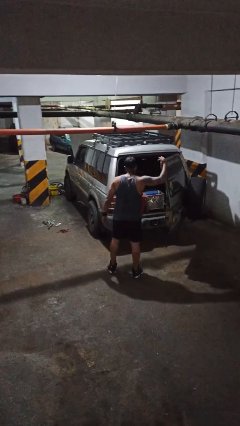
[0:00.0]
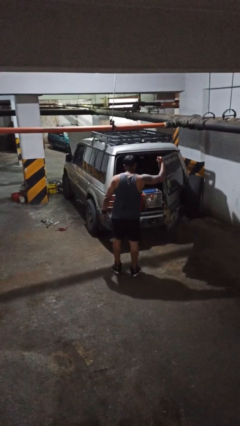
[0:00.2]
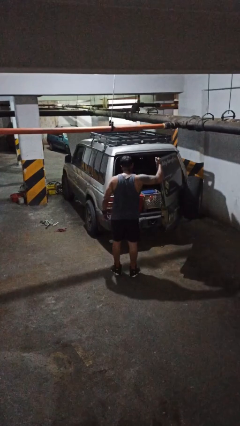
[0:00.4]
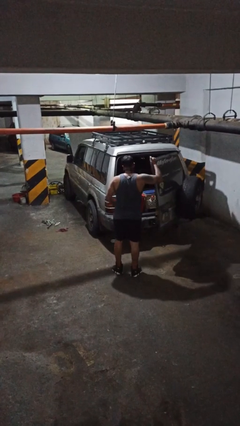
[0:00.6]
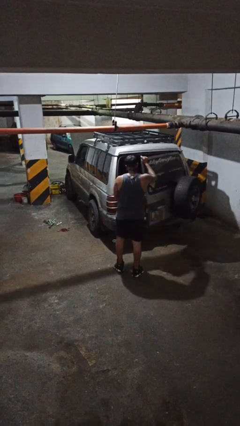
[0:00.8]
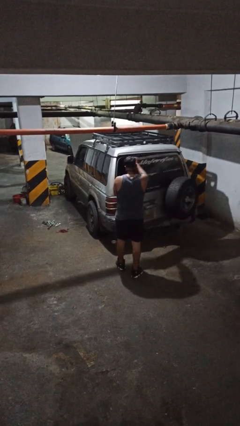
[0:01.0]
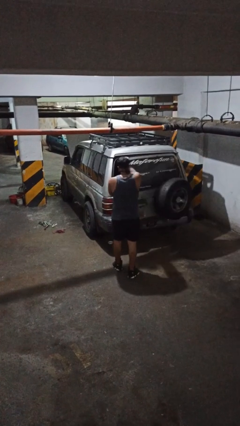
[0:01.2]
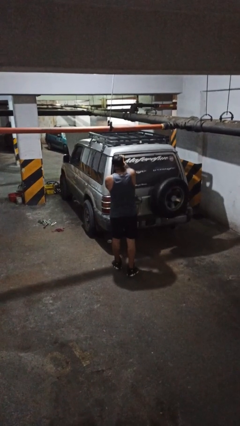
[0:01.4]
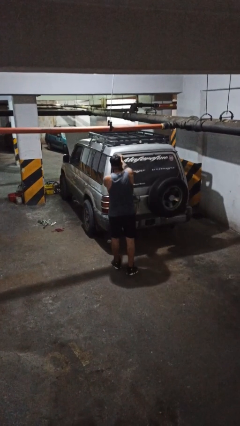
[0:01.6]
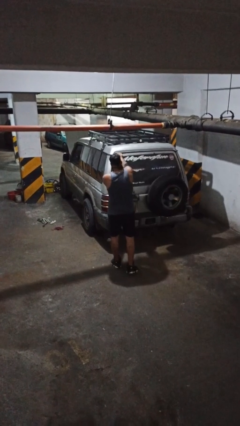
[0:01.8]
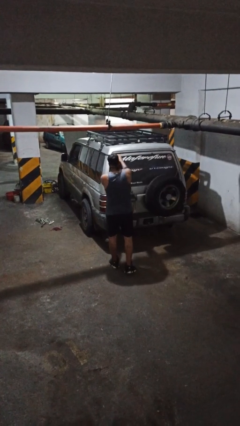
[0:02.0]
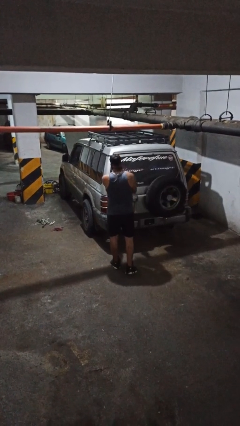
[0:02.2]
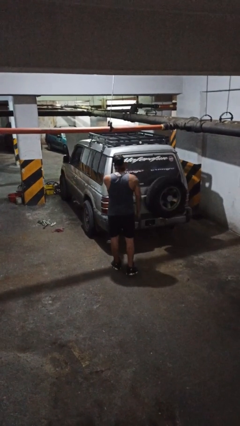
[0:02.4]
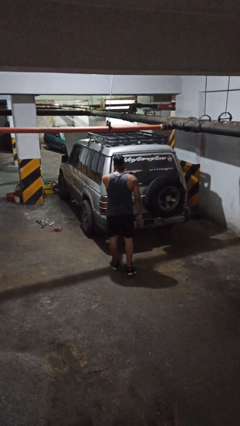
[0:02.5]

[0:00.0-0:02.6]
person closes car trunk

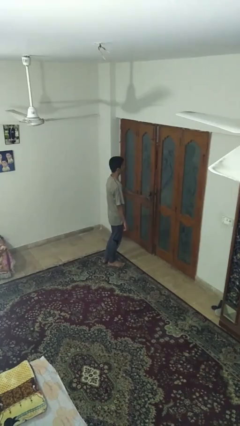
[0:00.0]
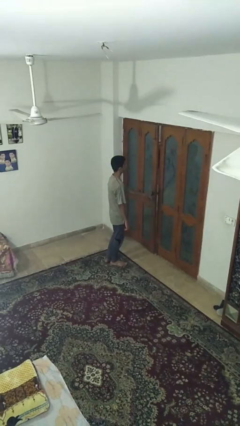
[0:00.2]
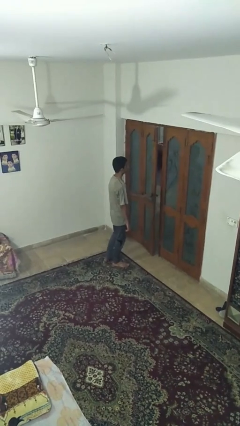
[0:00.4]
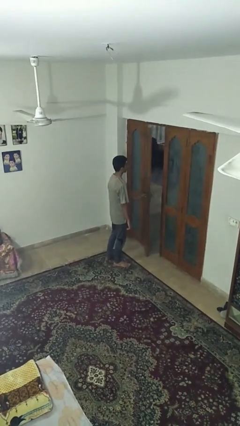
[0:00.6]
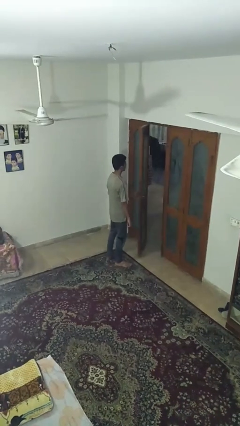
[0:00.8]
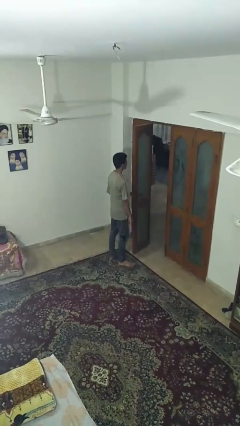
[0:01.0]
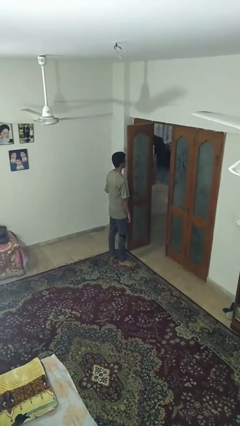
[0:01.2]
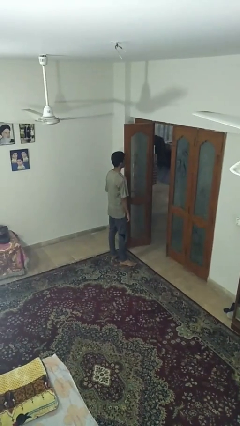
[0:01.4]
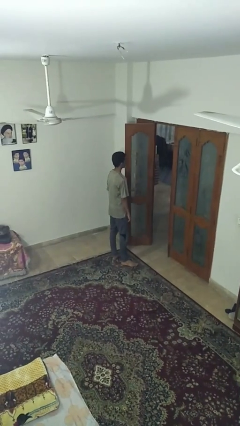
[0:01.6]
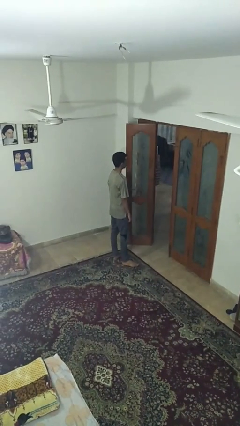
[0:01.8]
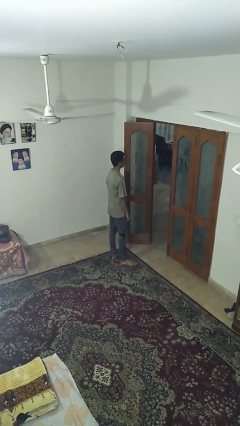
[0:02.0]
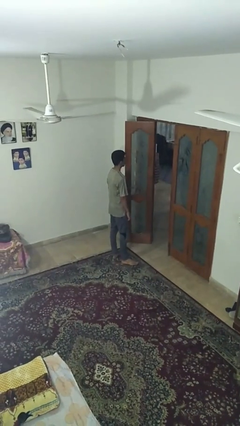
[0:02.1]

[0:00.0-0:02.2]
person opens facility door

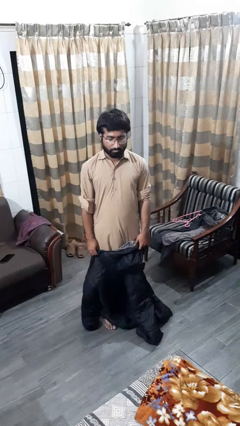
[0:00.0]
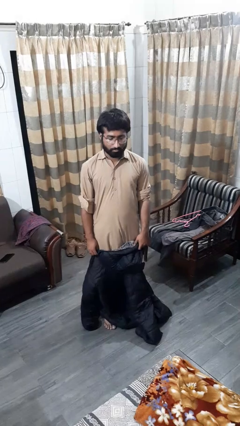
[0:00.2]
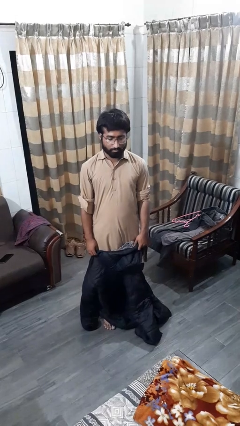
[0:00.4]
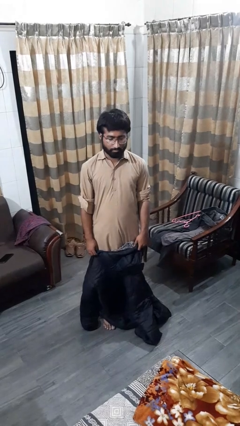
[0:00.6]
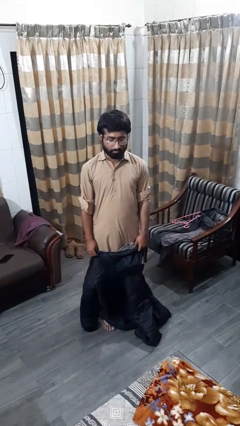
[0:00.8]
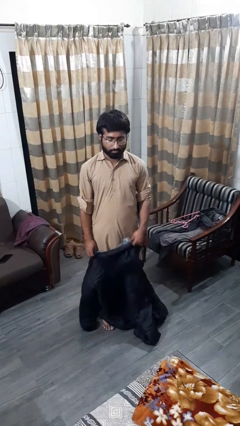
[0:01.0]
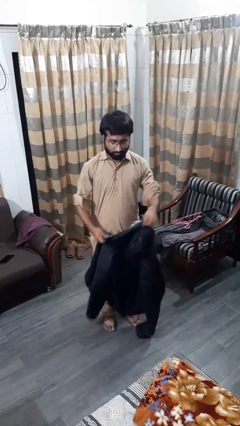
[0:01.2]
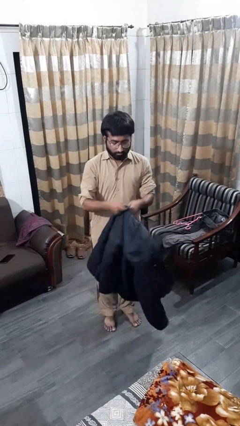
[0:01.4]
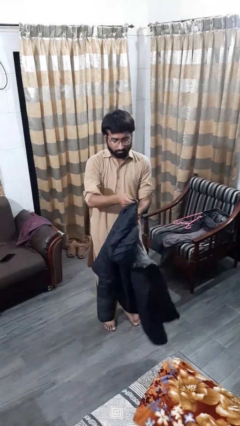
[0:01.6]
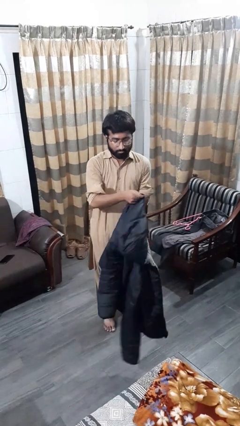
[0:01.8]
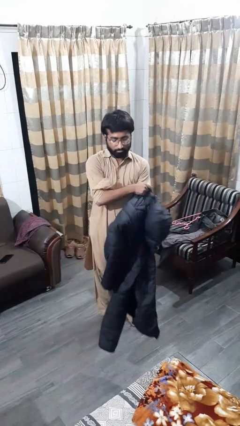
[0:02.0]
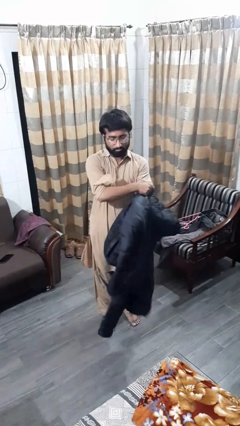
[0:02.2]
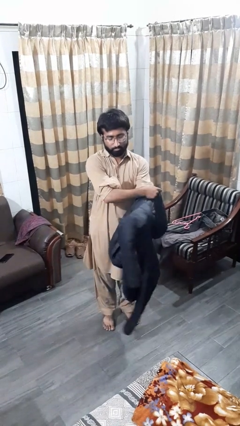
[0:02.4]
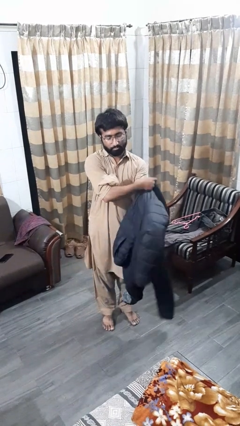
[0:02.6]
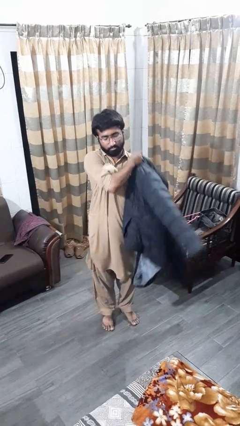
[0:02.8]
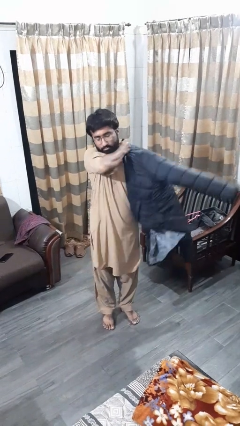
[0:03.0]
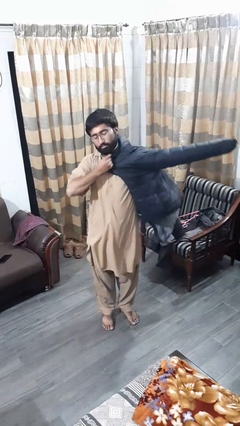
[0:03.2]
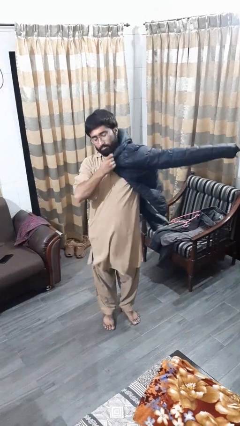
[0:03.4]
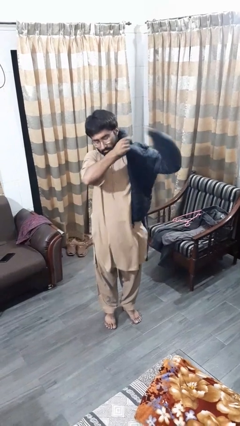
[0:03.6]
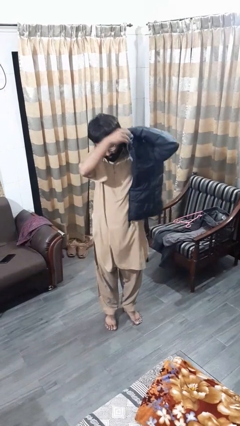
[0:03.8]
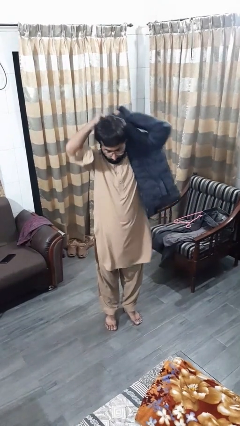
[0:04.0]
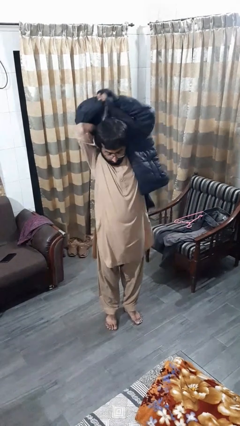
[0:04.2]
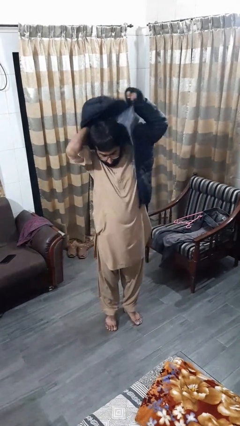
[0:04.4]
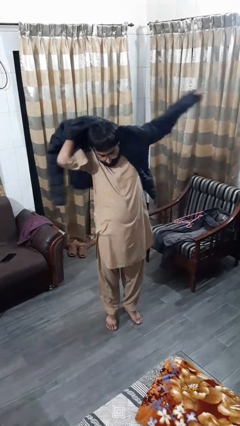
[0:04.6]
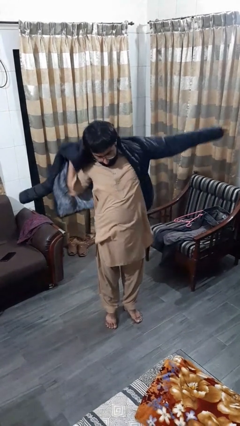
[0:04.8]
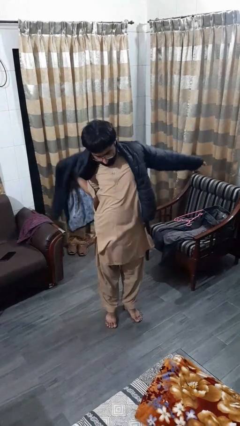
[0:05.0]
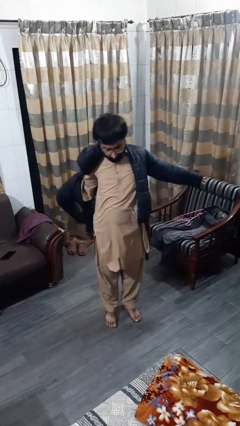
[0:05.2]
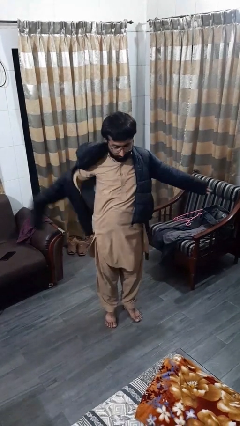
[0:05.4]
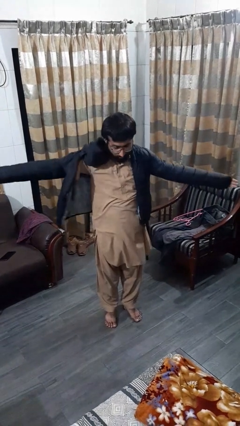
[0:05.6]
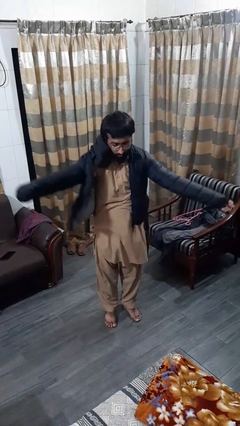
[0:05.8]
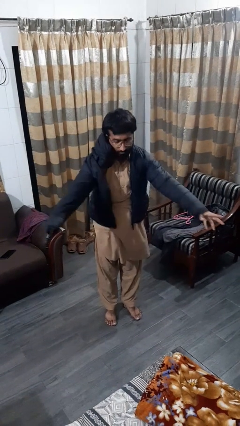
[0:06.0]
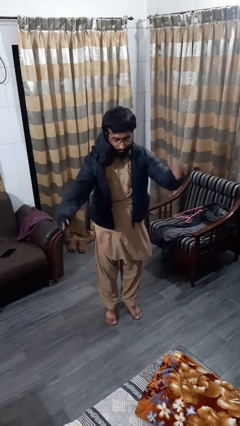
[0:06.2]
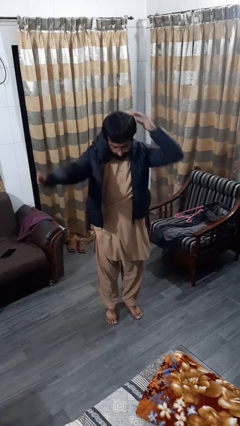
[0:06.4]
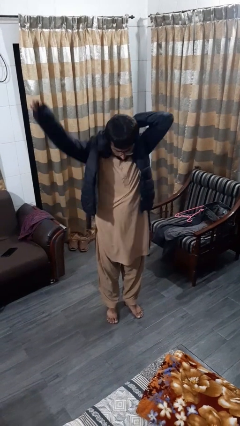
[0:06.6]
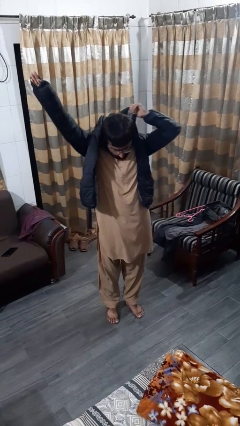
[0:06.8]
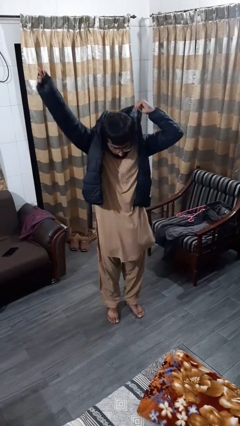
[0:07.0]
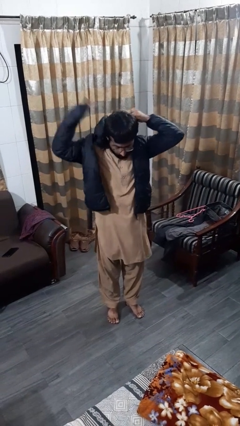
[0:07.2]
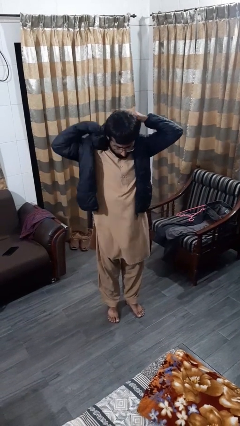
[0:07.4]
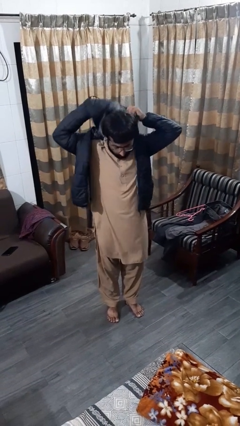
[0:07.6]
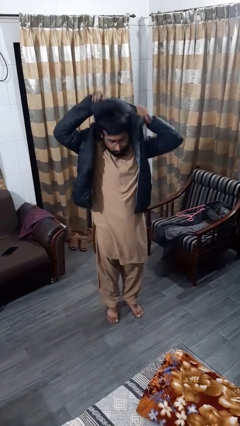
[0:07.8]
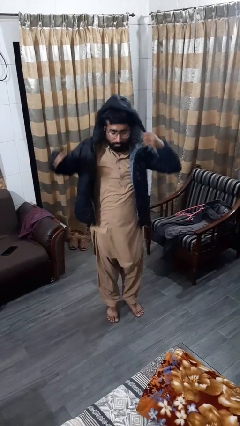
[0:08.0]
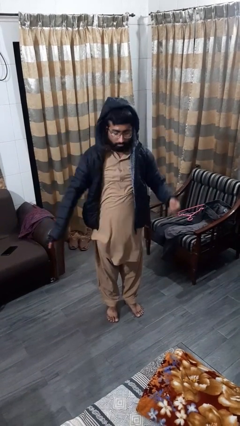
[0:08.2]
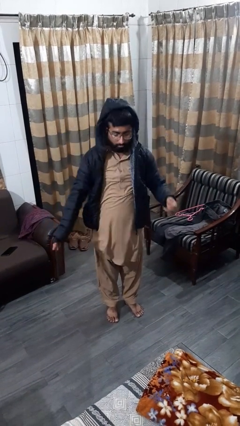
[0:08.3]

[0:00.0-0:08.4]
person puts on hoodie

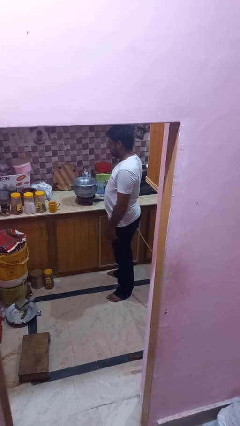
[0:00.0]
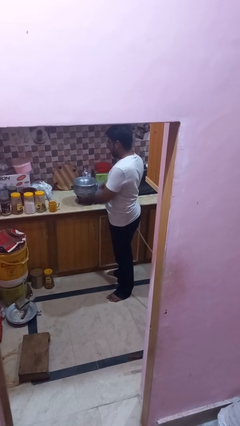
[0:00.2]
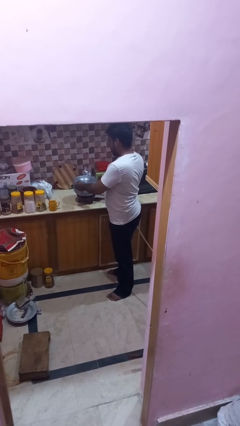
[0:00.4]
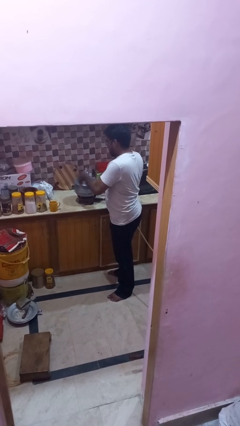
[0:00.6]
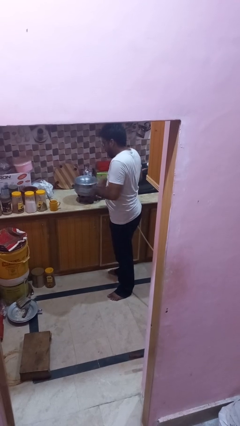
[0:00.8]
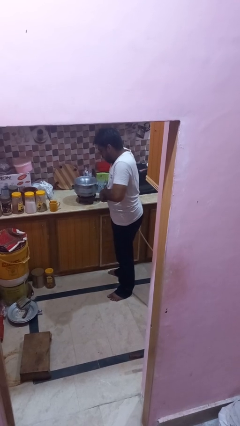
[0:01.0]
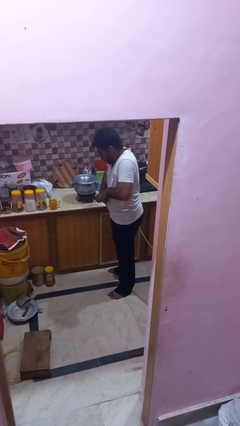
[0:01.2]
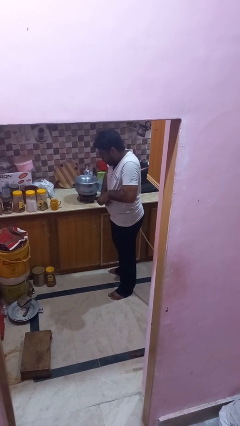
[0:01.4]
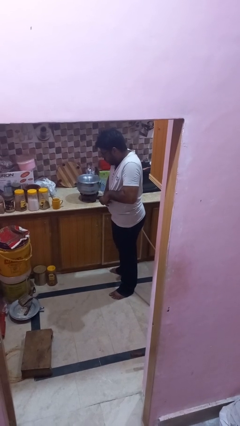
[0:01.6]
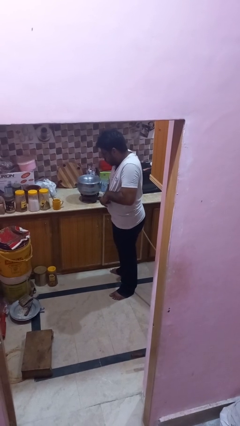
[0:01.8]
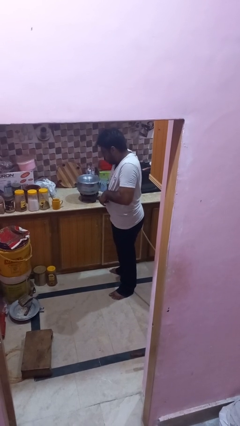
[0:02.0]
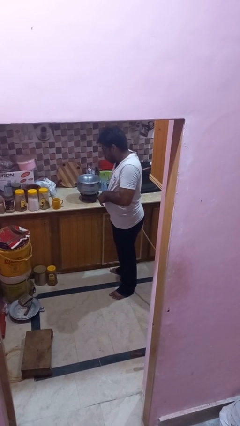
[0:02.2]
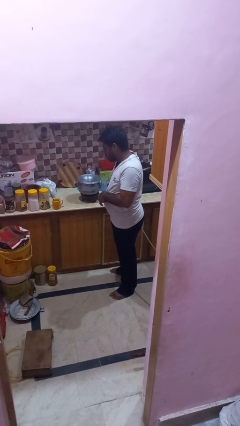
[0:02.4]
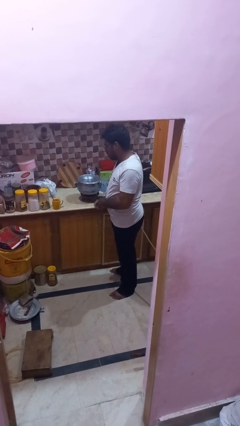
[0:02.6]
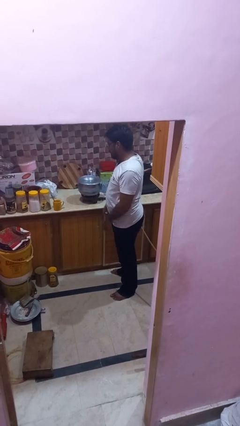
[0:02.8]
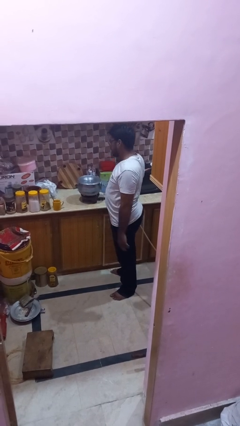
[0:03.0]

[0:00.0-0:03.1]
person burns hand

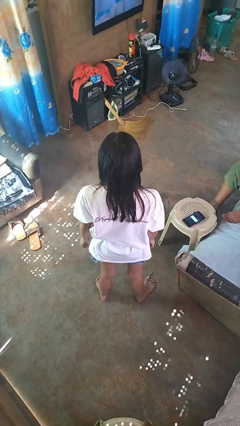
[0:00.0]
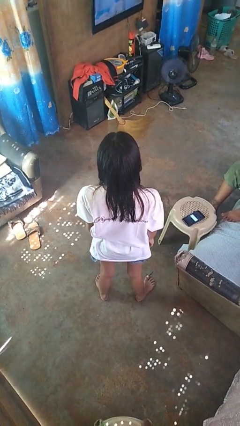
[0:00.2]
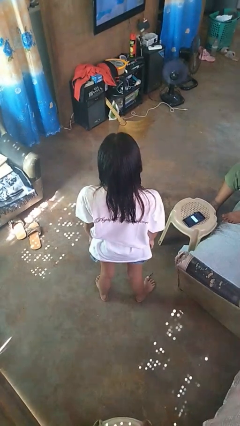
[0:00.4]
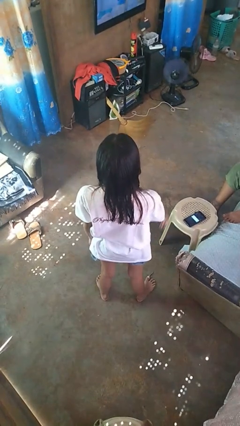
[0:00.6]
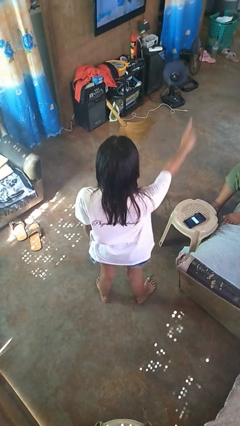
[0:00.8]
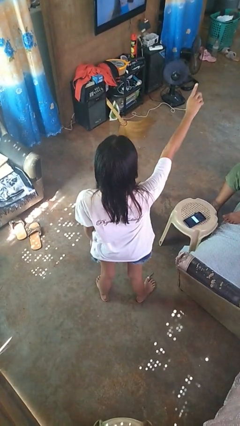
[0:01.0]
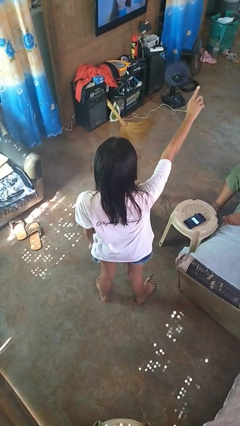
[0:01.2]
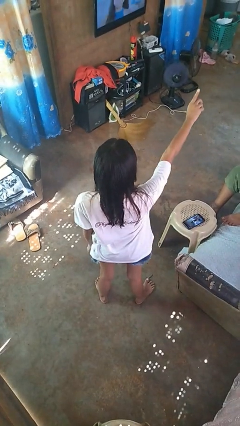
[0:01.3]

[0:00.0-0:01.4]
person gestures number three
